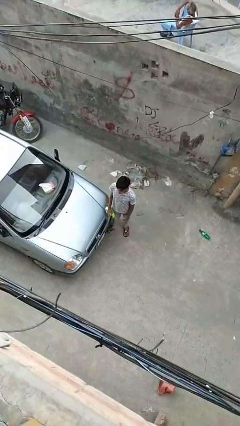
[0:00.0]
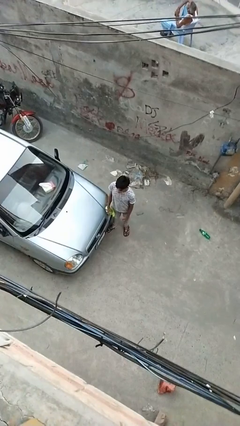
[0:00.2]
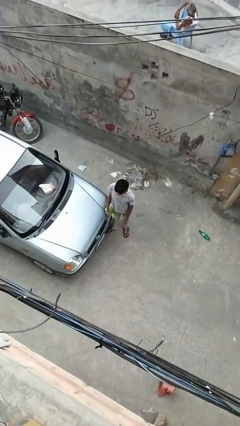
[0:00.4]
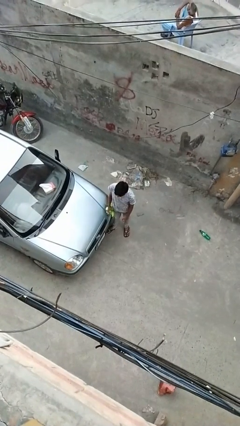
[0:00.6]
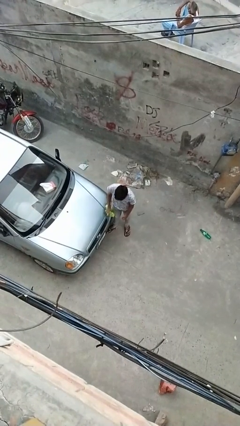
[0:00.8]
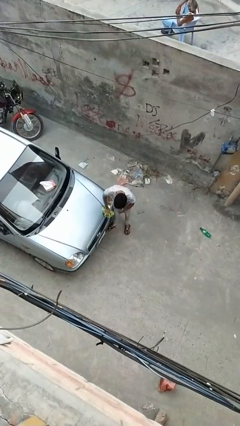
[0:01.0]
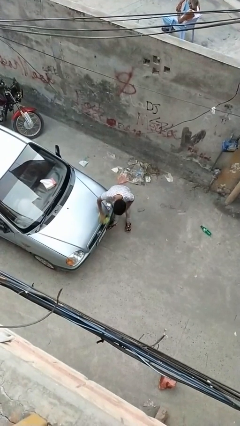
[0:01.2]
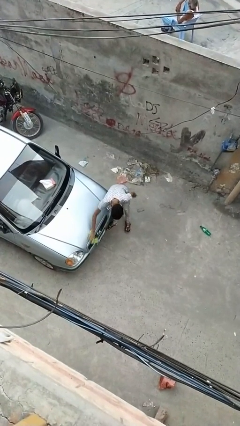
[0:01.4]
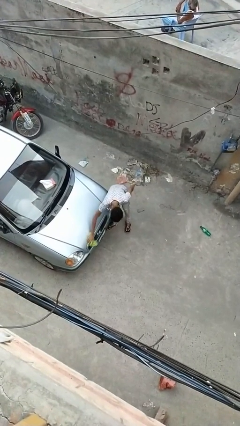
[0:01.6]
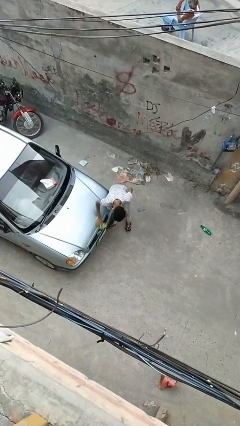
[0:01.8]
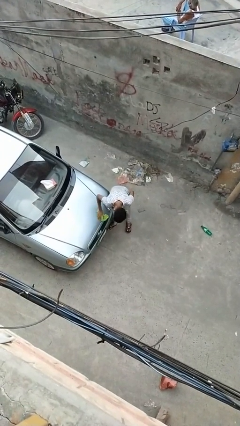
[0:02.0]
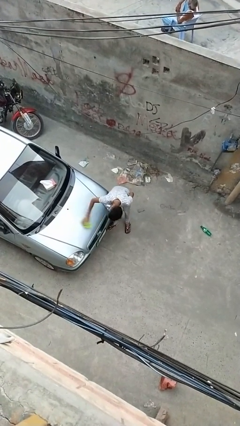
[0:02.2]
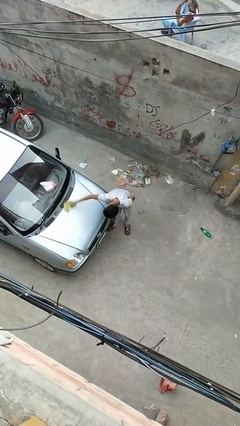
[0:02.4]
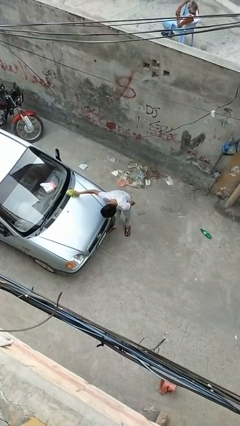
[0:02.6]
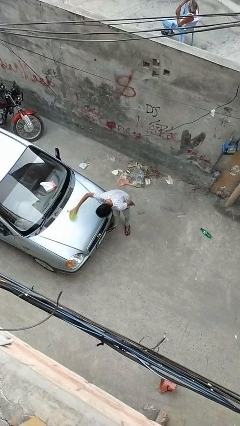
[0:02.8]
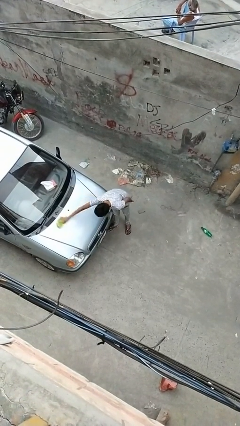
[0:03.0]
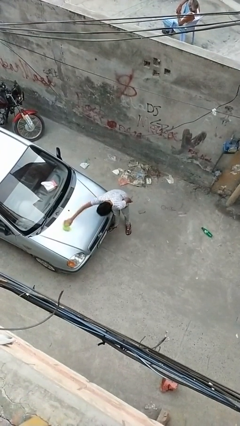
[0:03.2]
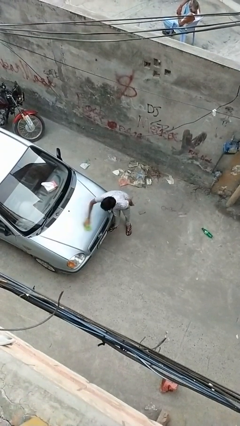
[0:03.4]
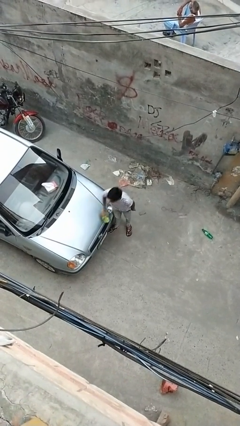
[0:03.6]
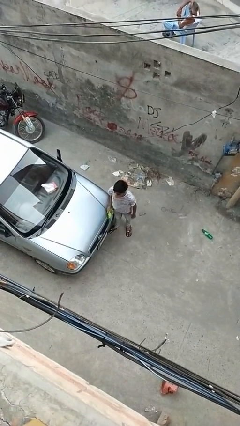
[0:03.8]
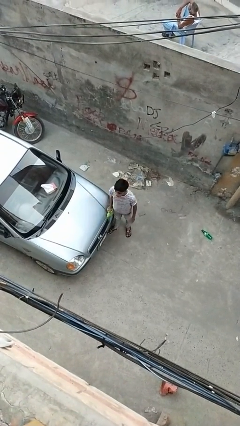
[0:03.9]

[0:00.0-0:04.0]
person polishes car with rag

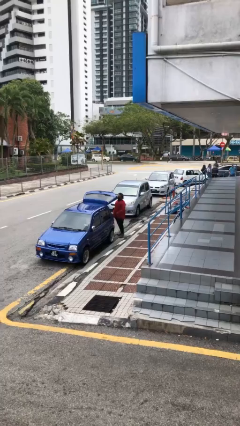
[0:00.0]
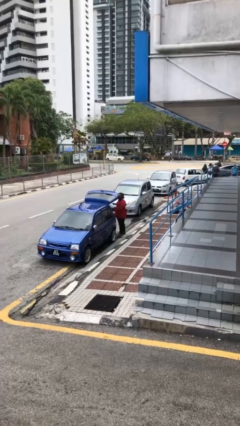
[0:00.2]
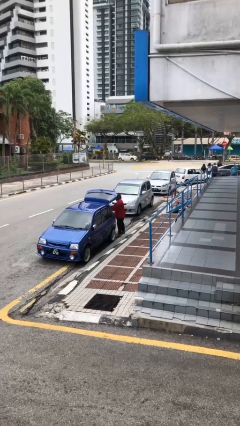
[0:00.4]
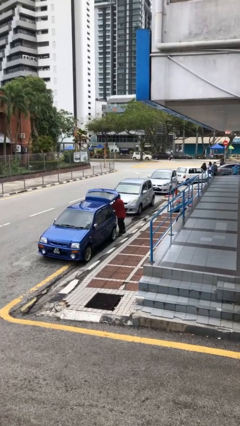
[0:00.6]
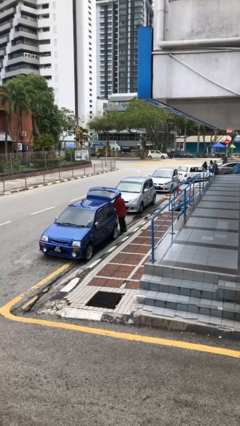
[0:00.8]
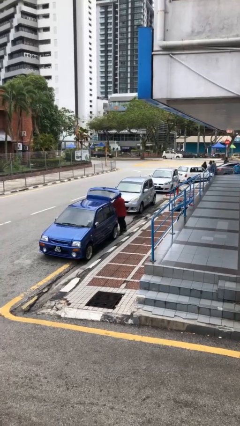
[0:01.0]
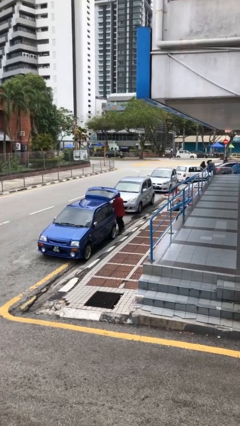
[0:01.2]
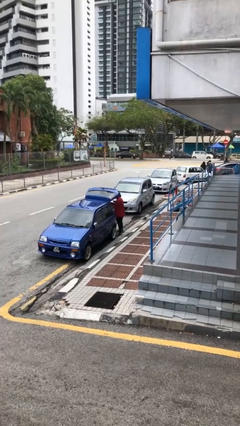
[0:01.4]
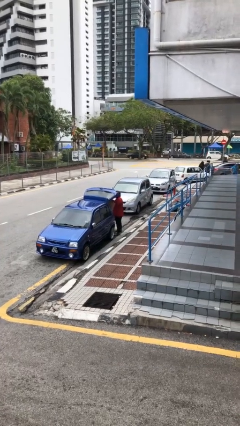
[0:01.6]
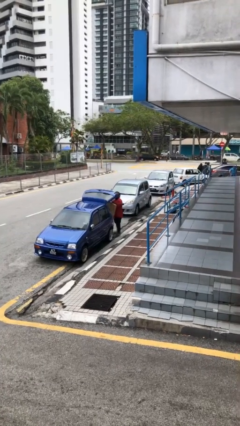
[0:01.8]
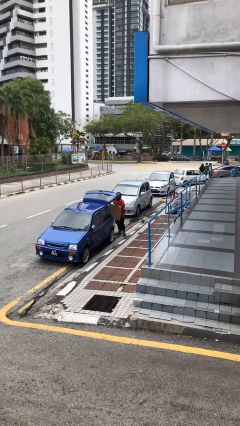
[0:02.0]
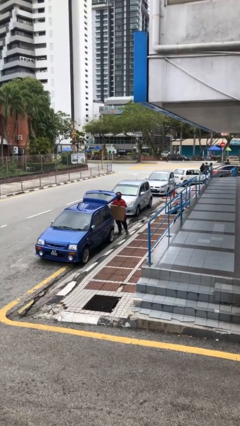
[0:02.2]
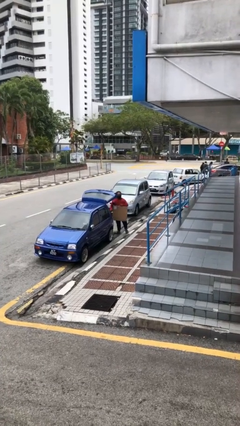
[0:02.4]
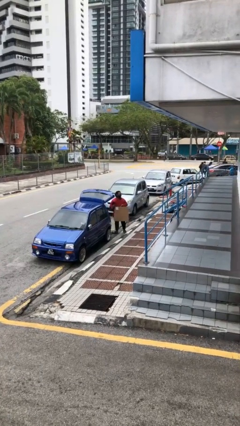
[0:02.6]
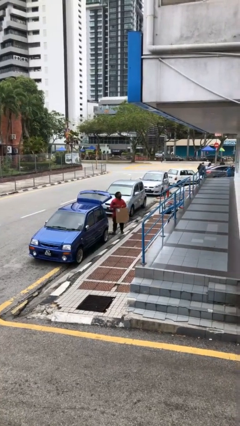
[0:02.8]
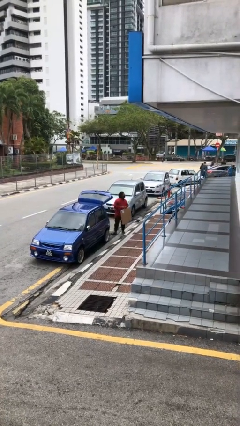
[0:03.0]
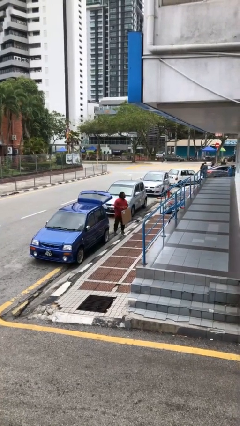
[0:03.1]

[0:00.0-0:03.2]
person unloads car

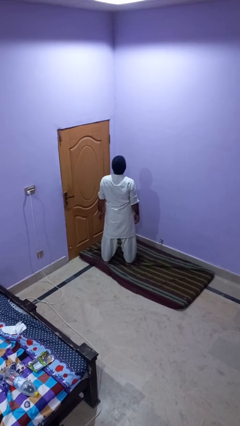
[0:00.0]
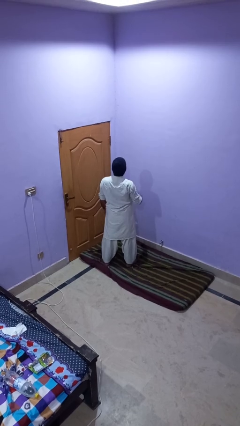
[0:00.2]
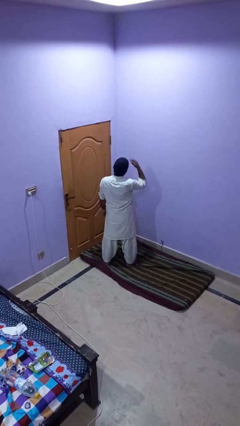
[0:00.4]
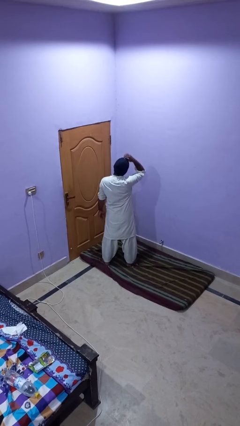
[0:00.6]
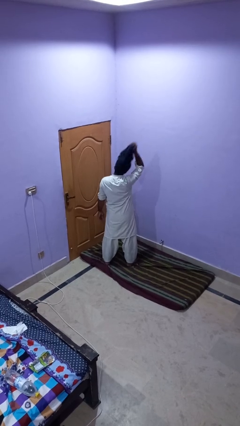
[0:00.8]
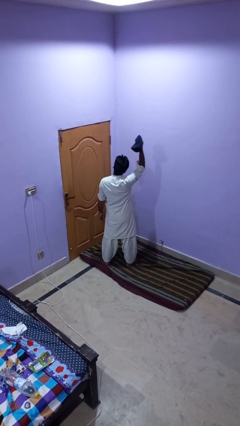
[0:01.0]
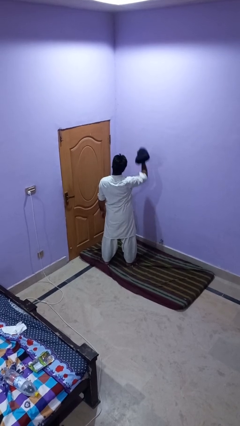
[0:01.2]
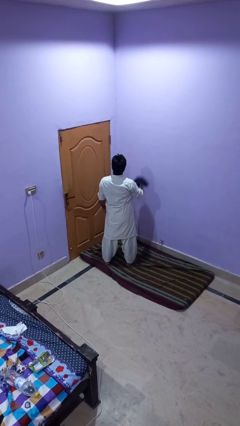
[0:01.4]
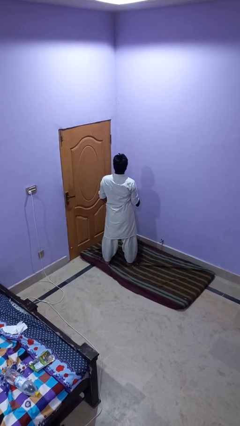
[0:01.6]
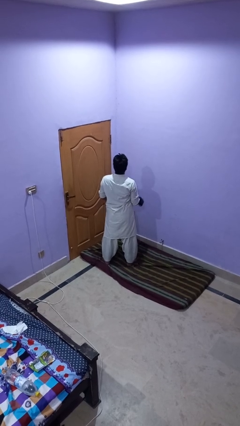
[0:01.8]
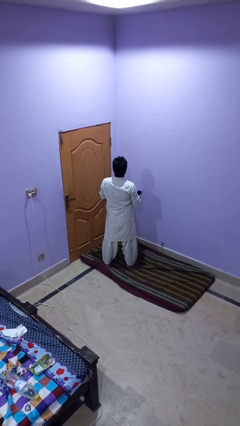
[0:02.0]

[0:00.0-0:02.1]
person takes off hat

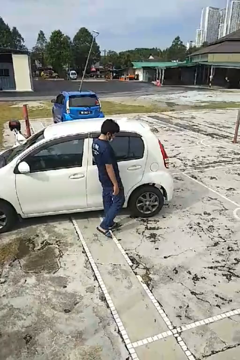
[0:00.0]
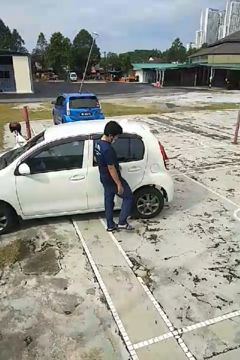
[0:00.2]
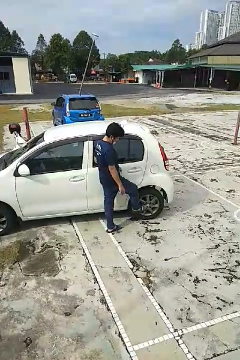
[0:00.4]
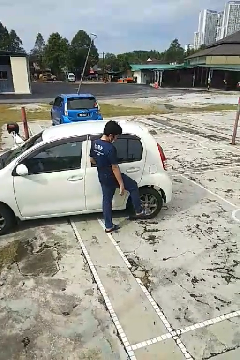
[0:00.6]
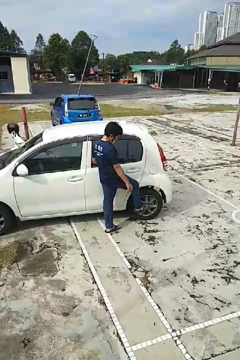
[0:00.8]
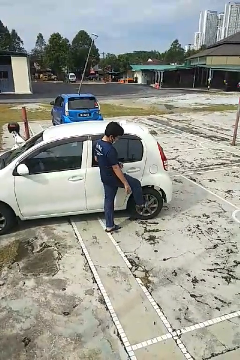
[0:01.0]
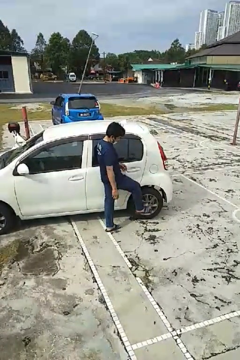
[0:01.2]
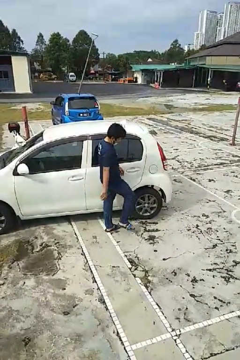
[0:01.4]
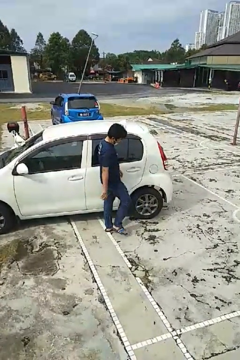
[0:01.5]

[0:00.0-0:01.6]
person kicks car tires

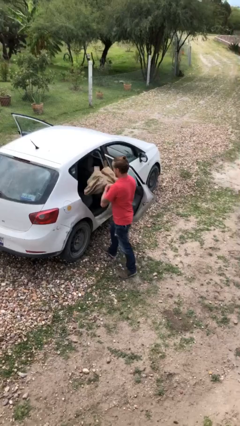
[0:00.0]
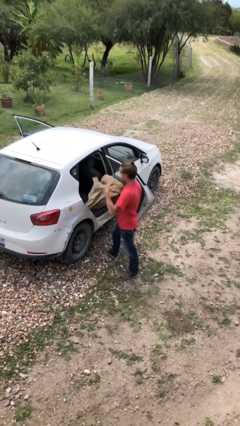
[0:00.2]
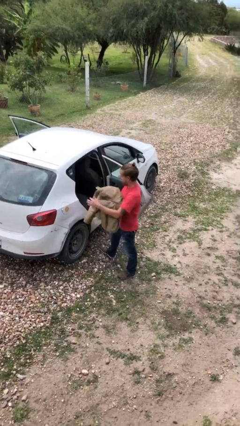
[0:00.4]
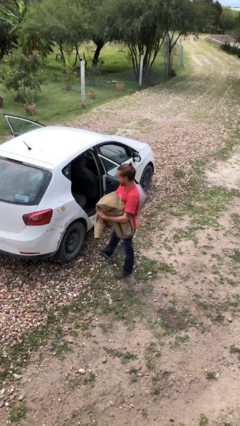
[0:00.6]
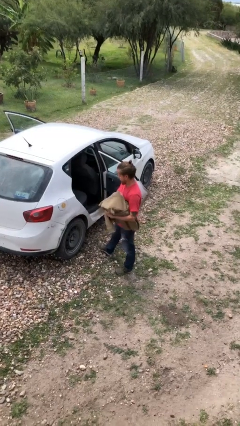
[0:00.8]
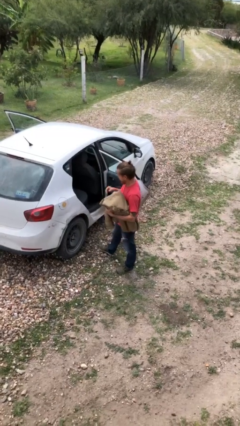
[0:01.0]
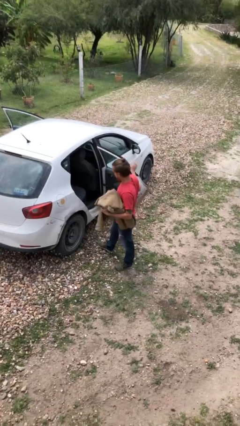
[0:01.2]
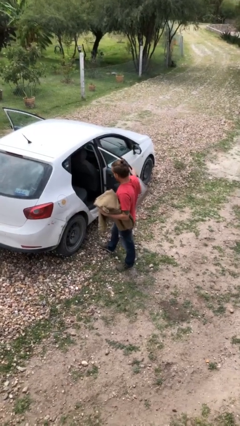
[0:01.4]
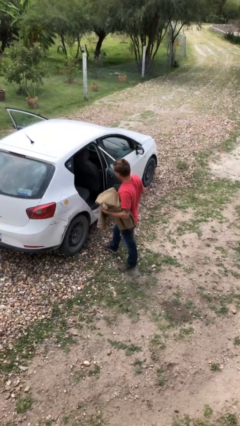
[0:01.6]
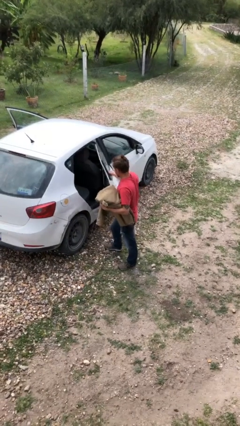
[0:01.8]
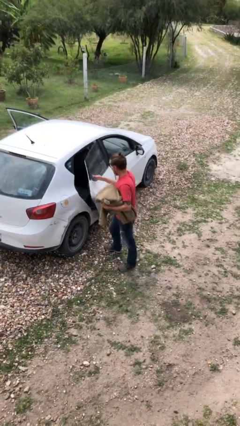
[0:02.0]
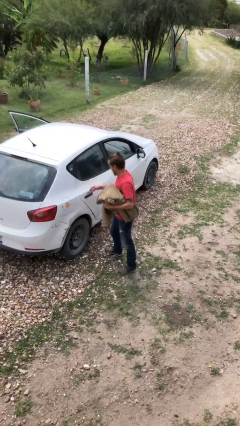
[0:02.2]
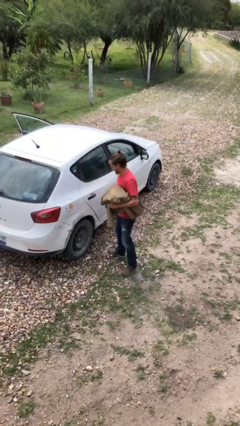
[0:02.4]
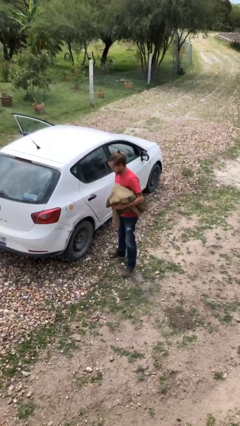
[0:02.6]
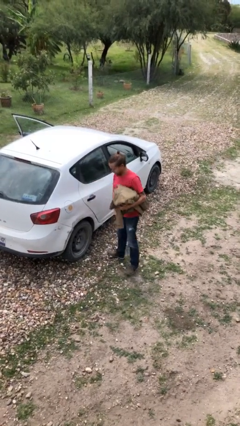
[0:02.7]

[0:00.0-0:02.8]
person closes car door

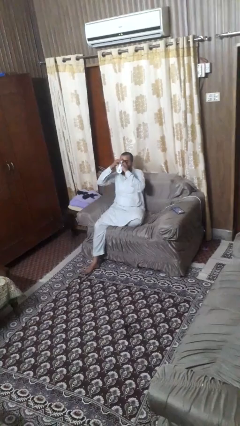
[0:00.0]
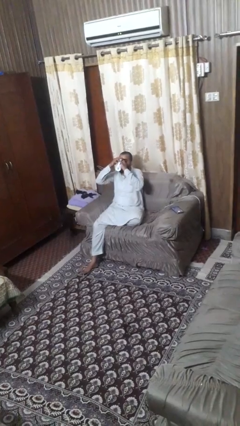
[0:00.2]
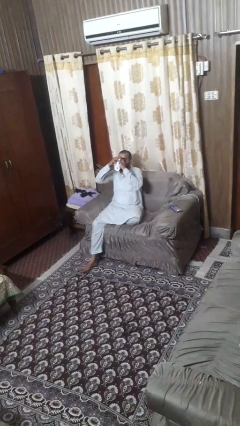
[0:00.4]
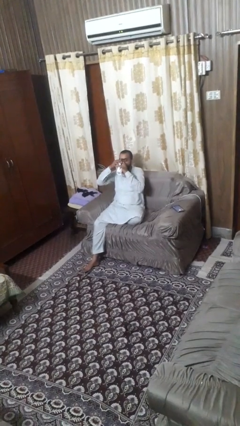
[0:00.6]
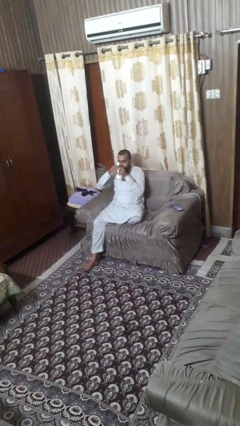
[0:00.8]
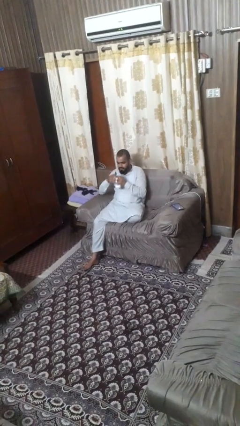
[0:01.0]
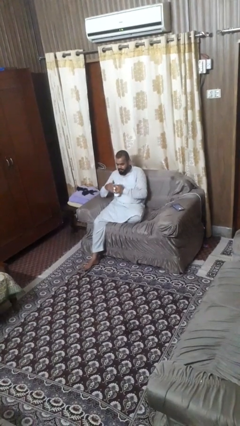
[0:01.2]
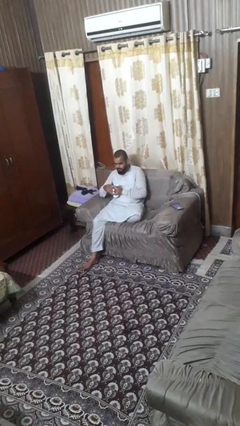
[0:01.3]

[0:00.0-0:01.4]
person drinks from mug

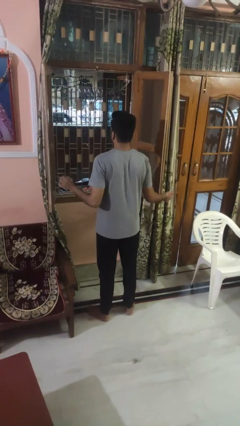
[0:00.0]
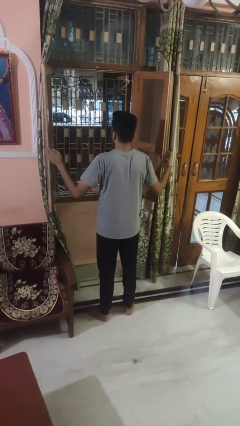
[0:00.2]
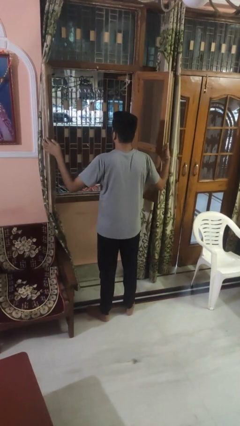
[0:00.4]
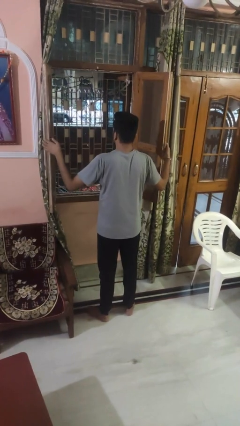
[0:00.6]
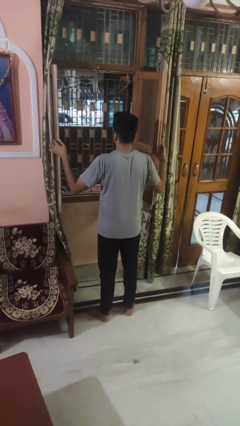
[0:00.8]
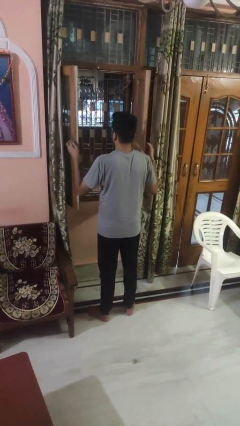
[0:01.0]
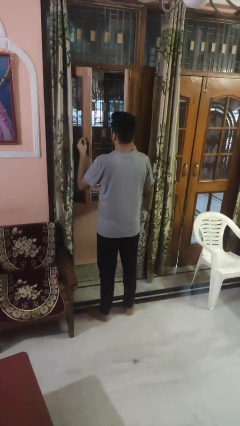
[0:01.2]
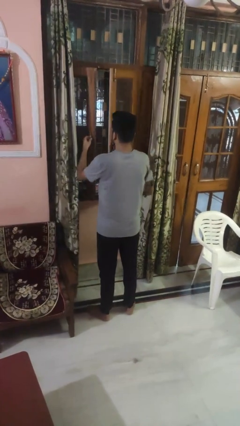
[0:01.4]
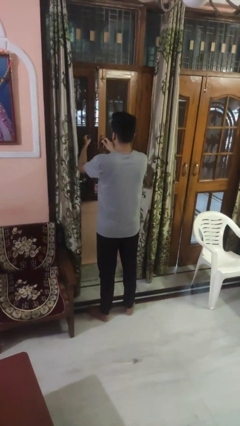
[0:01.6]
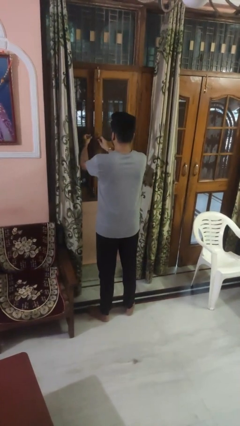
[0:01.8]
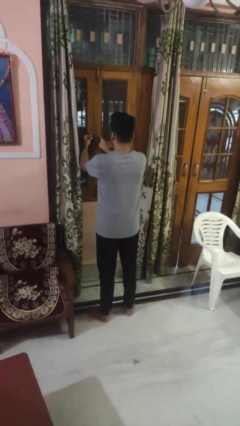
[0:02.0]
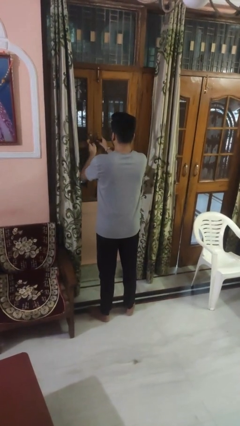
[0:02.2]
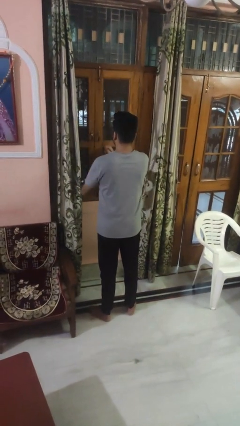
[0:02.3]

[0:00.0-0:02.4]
person closes home window
